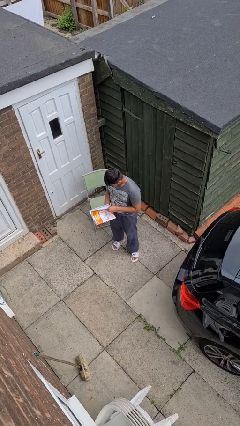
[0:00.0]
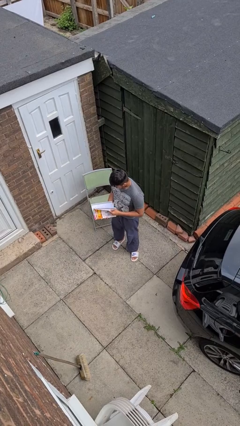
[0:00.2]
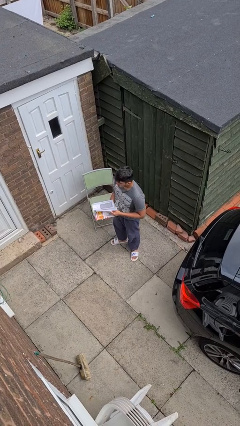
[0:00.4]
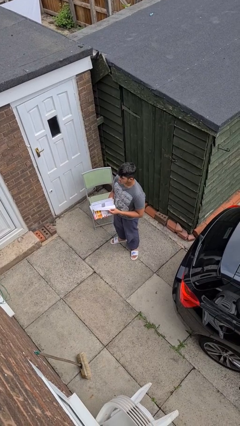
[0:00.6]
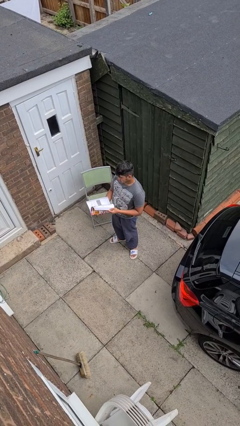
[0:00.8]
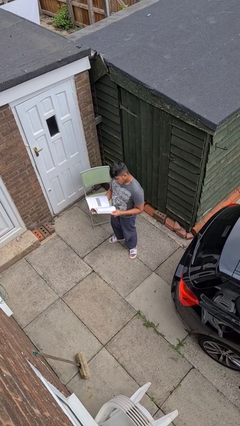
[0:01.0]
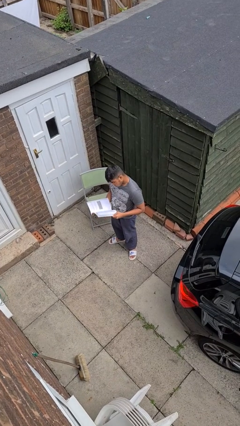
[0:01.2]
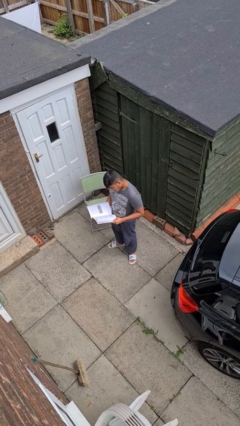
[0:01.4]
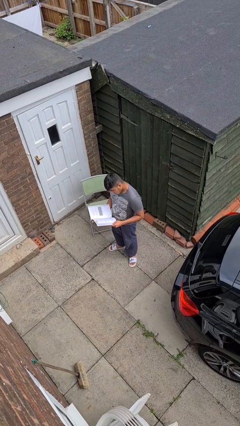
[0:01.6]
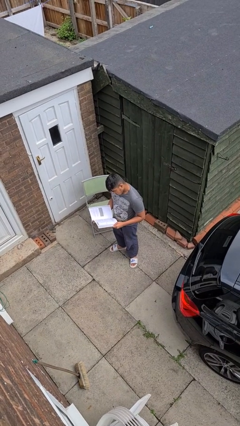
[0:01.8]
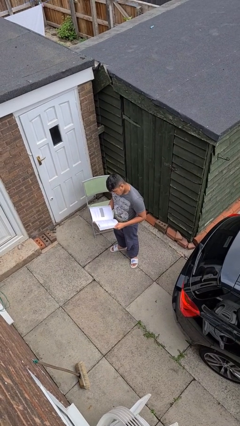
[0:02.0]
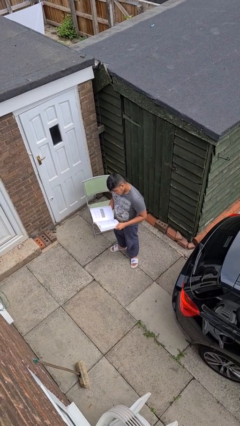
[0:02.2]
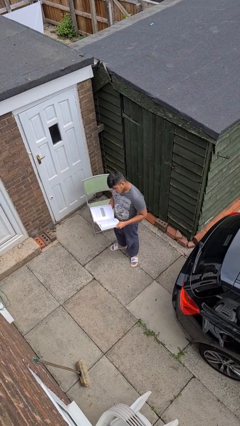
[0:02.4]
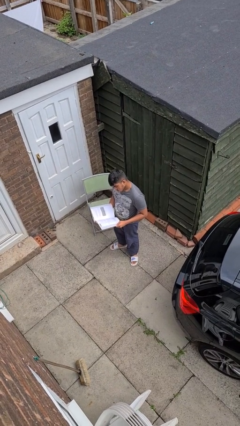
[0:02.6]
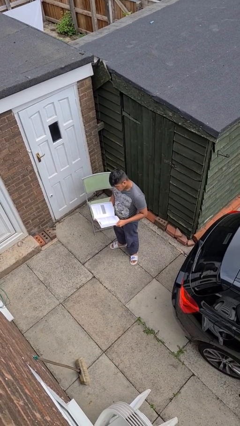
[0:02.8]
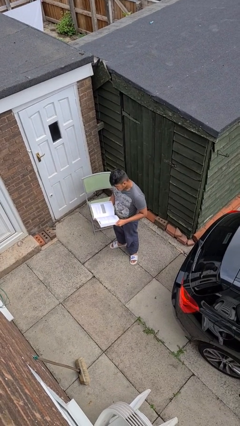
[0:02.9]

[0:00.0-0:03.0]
person reads book

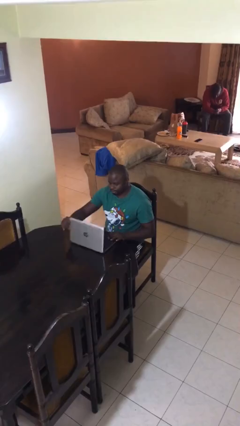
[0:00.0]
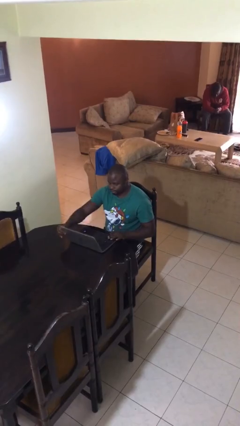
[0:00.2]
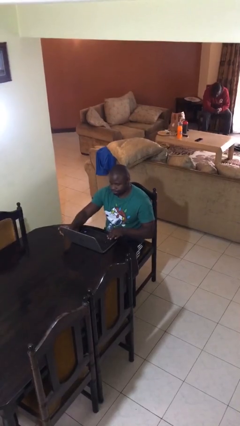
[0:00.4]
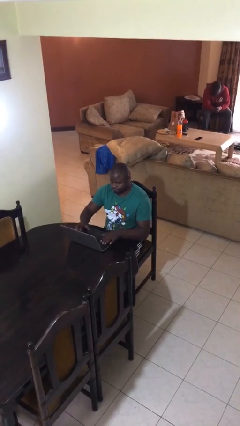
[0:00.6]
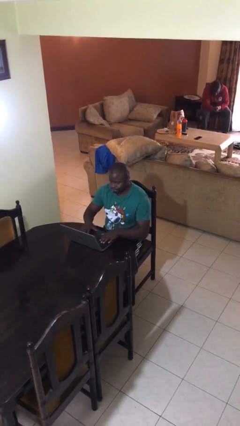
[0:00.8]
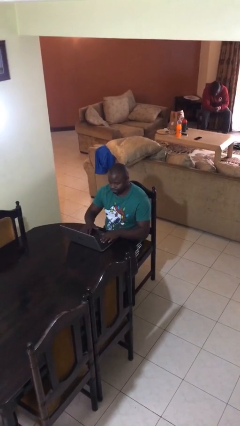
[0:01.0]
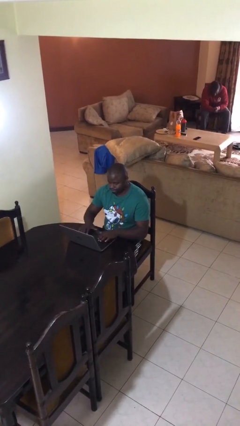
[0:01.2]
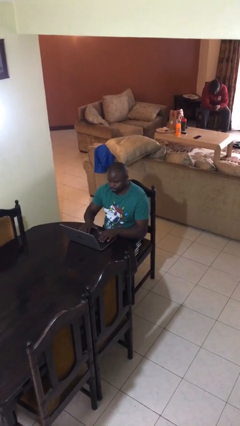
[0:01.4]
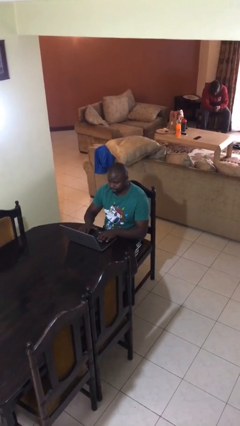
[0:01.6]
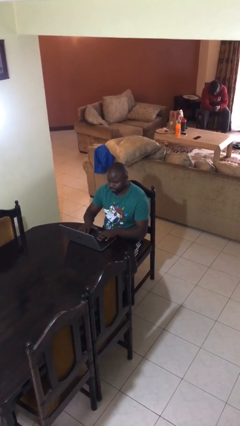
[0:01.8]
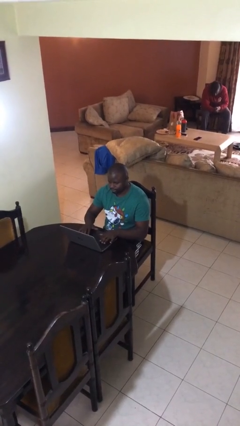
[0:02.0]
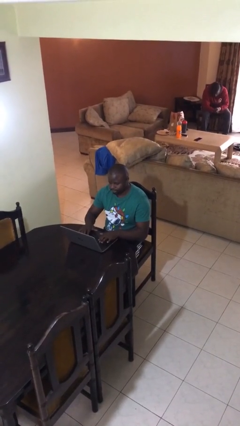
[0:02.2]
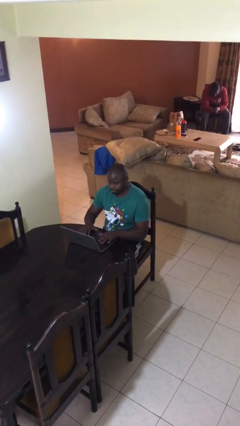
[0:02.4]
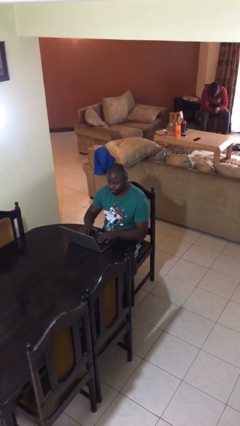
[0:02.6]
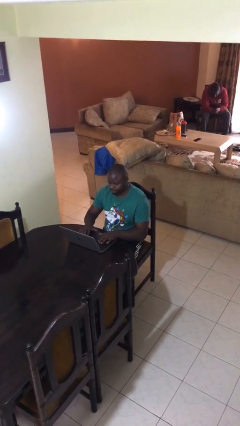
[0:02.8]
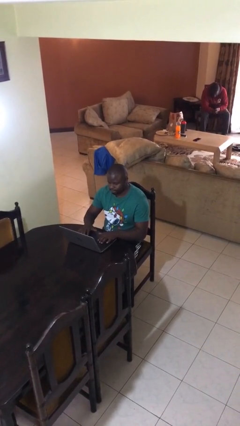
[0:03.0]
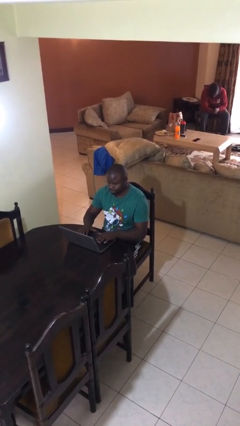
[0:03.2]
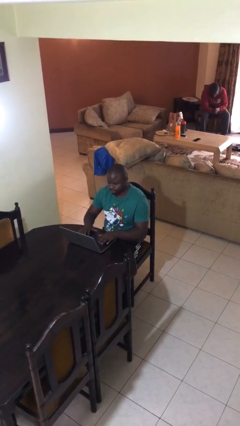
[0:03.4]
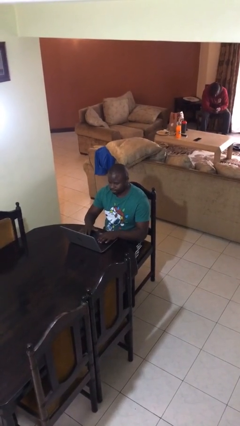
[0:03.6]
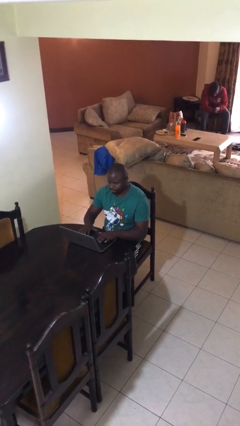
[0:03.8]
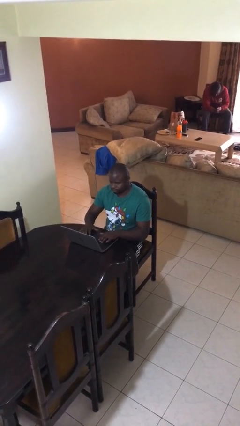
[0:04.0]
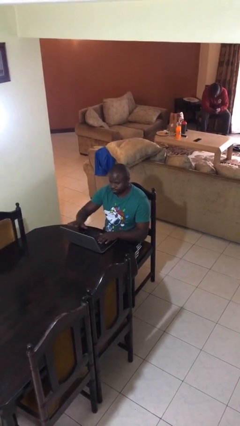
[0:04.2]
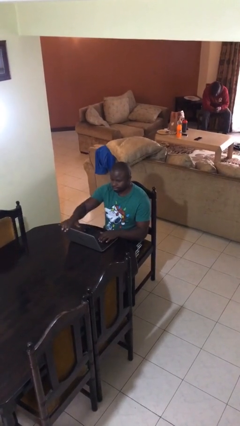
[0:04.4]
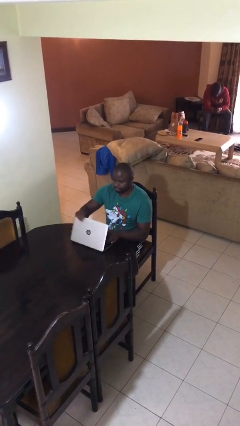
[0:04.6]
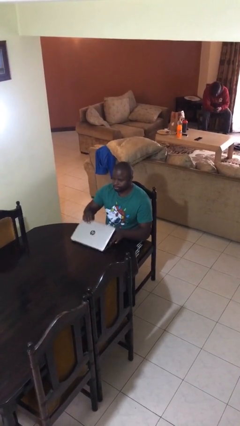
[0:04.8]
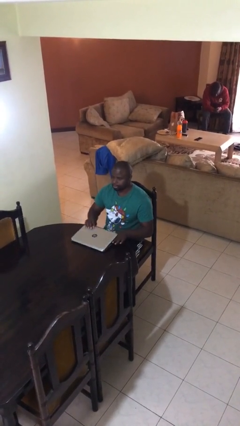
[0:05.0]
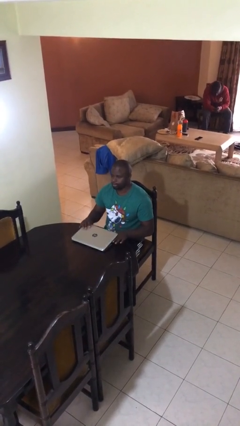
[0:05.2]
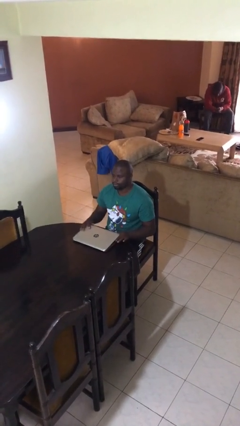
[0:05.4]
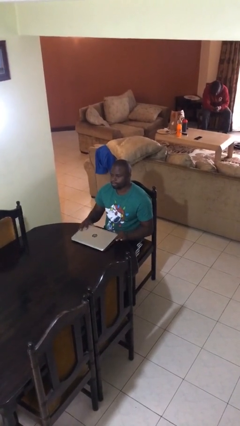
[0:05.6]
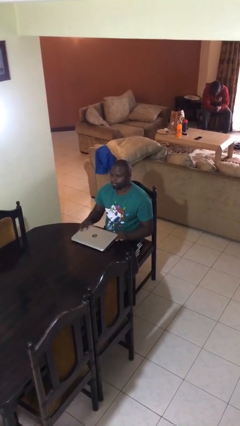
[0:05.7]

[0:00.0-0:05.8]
person interacts with laptop

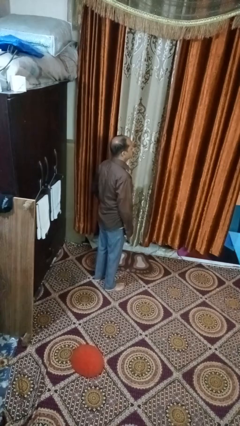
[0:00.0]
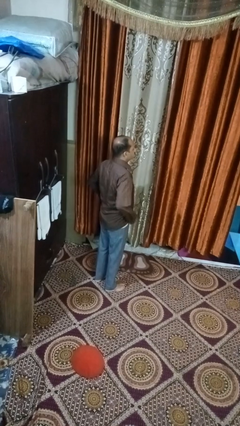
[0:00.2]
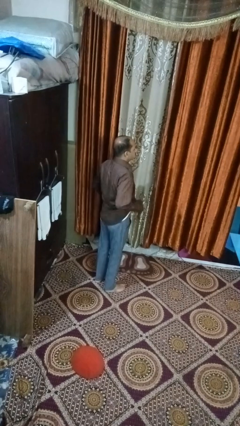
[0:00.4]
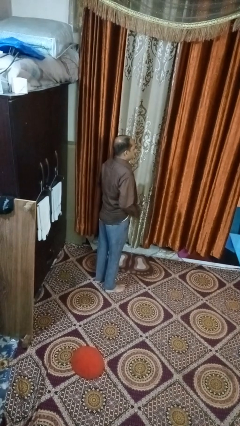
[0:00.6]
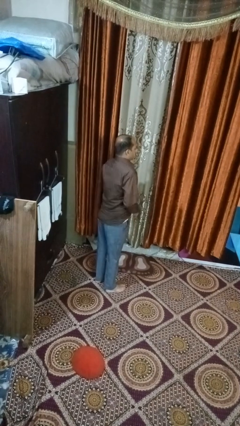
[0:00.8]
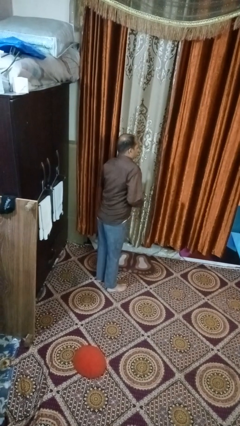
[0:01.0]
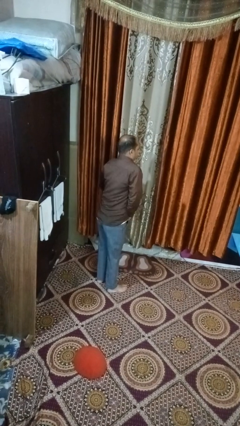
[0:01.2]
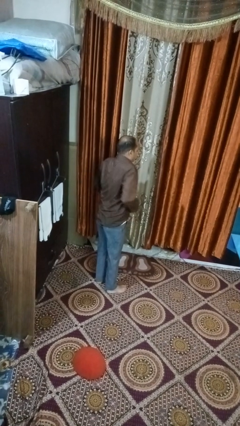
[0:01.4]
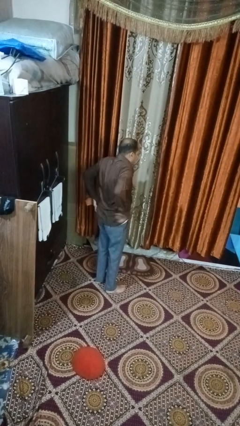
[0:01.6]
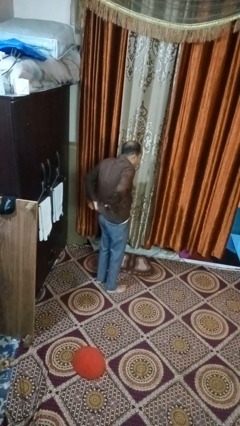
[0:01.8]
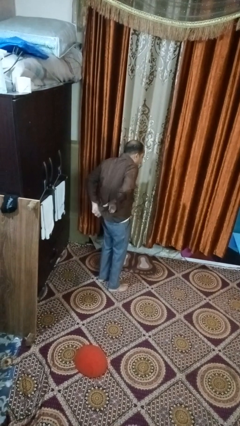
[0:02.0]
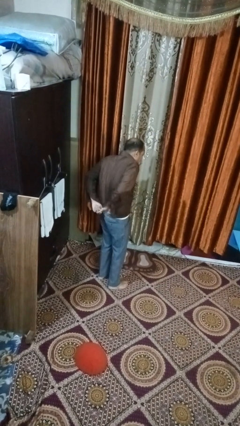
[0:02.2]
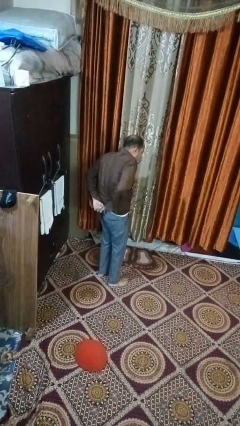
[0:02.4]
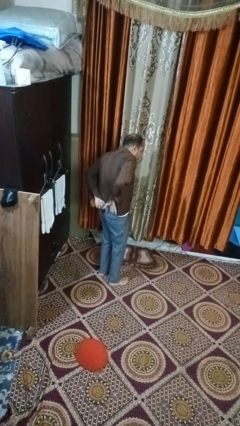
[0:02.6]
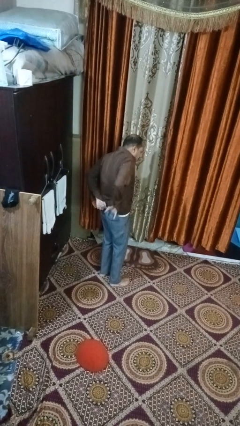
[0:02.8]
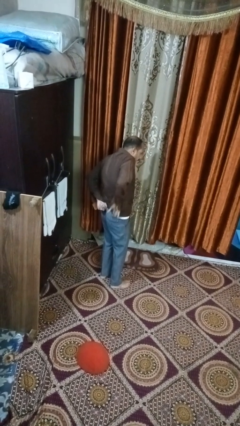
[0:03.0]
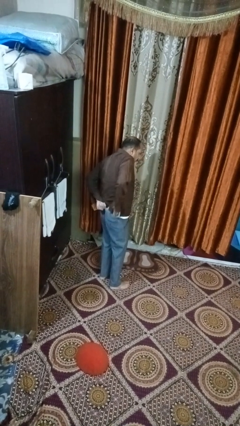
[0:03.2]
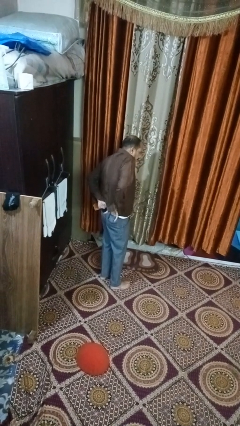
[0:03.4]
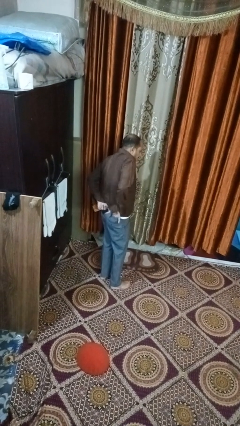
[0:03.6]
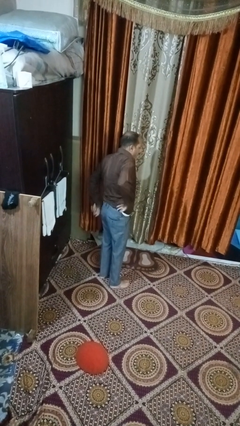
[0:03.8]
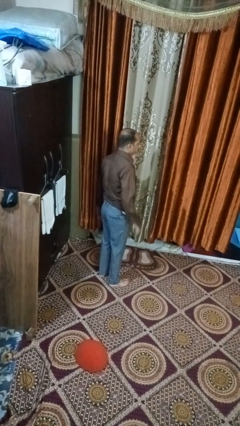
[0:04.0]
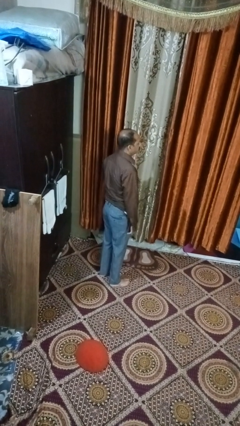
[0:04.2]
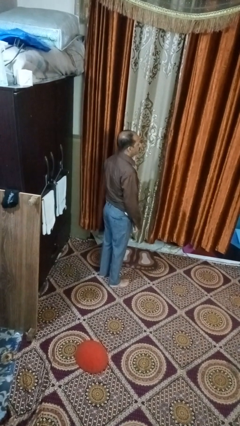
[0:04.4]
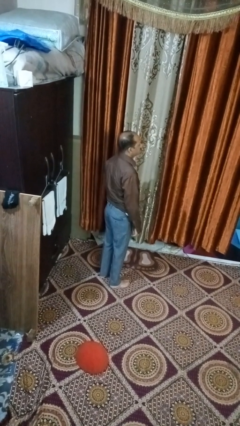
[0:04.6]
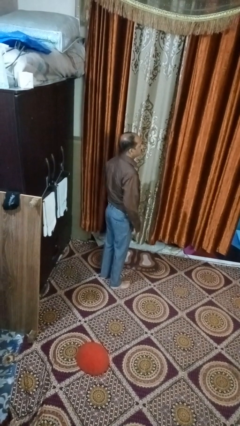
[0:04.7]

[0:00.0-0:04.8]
person tucks in shirt

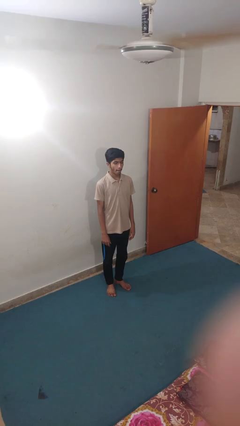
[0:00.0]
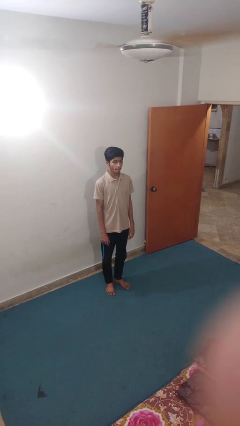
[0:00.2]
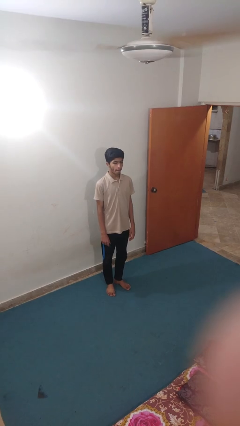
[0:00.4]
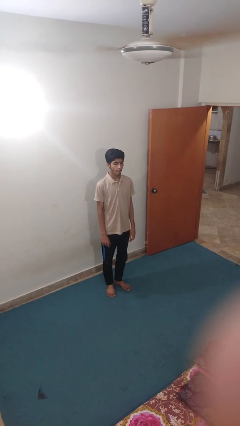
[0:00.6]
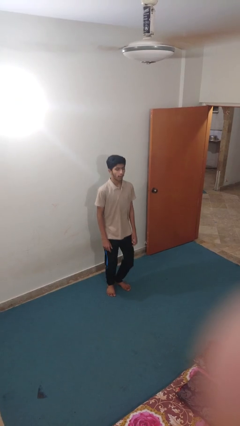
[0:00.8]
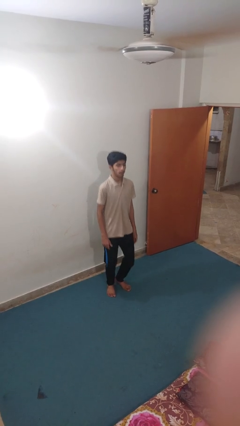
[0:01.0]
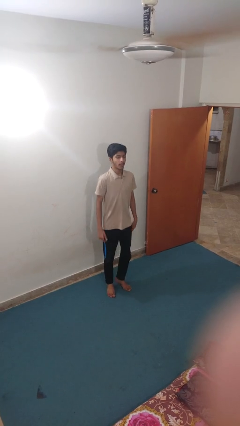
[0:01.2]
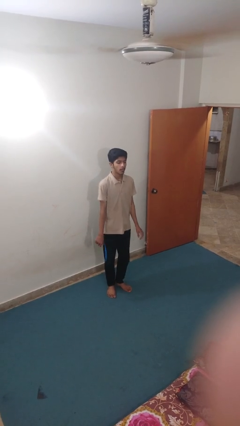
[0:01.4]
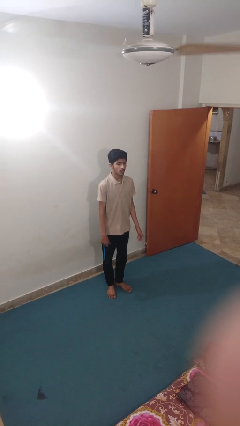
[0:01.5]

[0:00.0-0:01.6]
person jumps

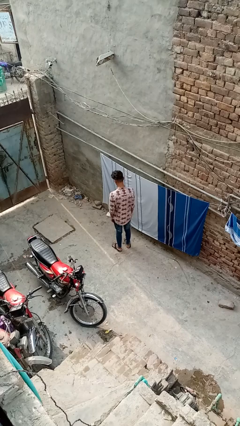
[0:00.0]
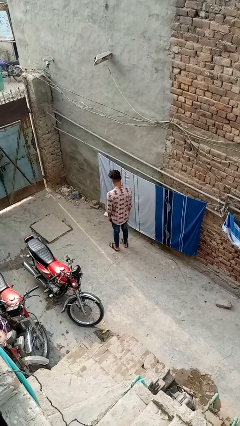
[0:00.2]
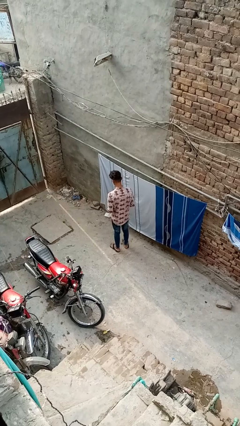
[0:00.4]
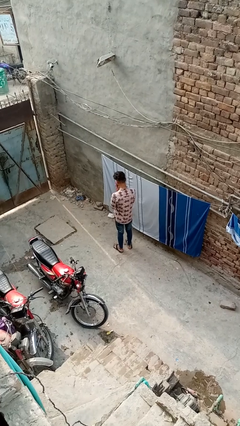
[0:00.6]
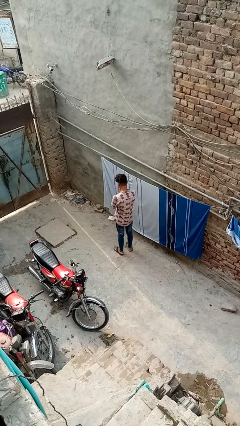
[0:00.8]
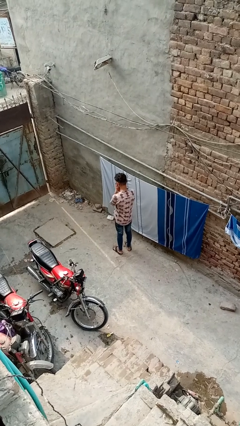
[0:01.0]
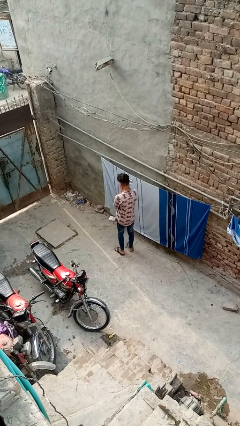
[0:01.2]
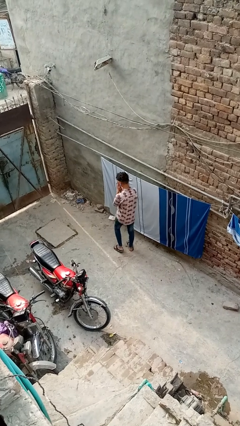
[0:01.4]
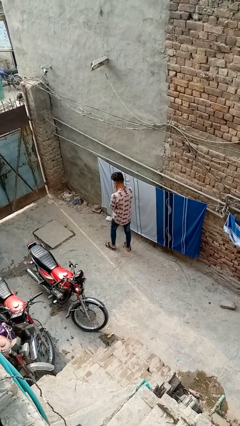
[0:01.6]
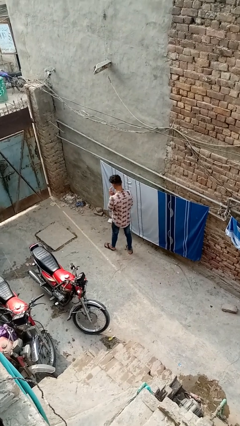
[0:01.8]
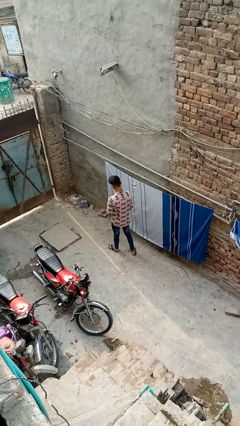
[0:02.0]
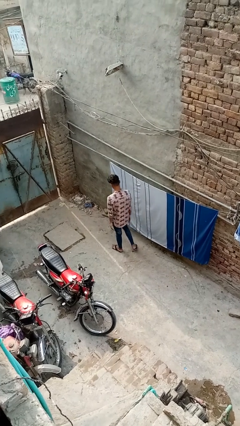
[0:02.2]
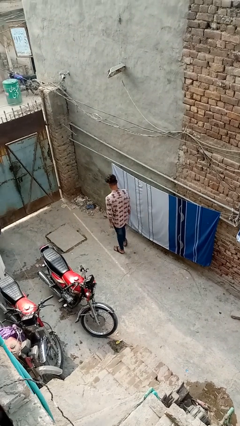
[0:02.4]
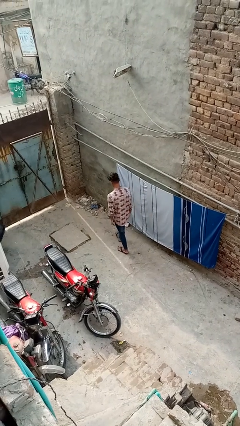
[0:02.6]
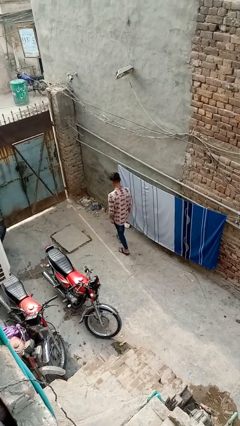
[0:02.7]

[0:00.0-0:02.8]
person blows into hands
